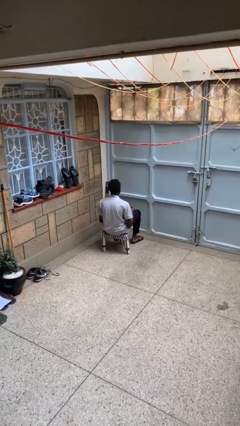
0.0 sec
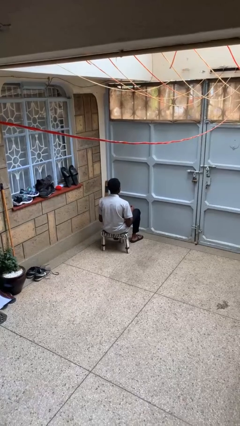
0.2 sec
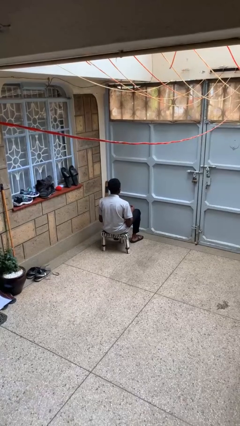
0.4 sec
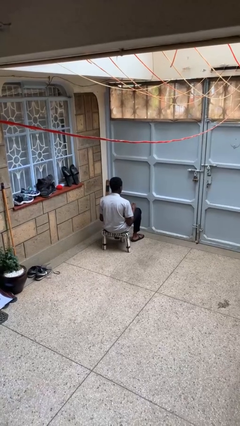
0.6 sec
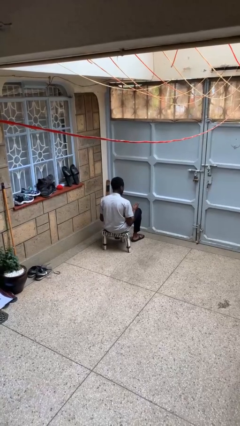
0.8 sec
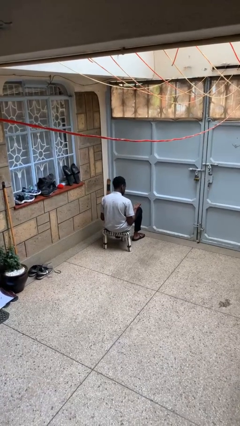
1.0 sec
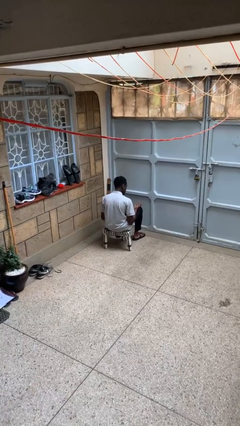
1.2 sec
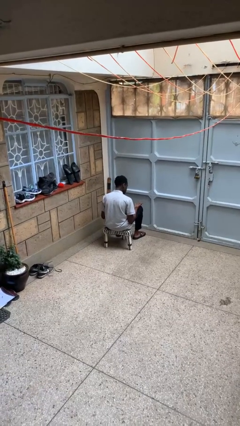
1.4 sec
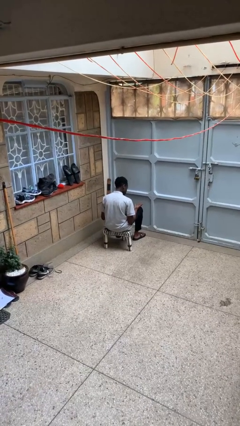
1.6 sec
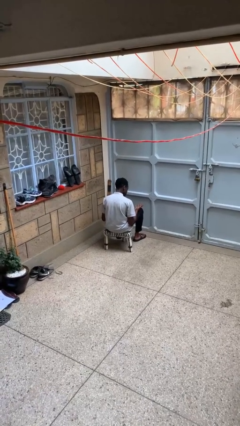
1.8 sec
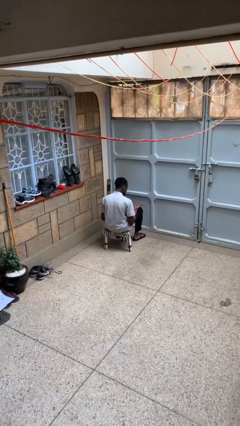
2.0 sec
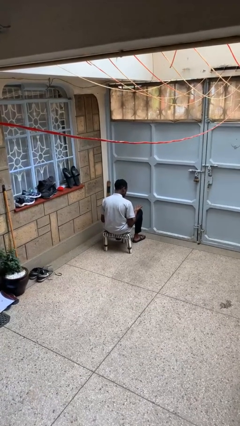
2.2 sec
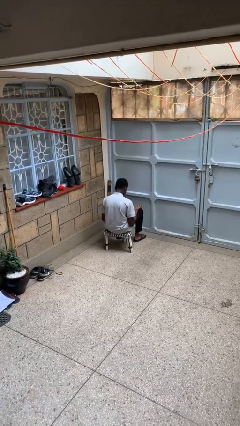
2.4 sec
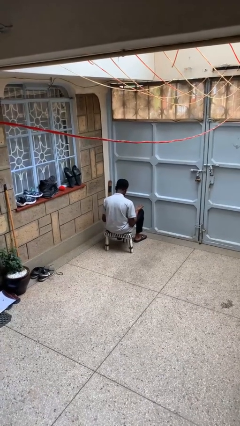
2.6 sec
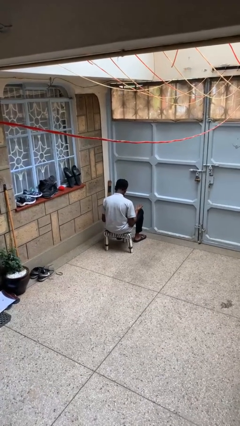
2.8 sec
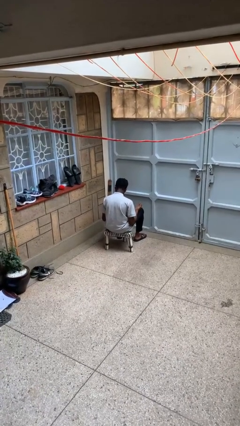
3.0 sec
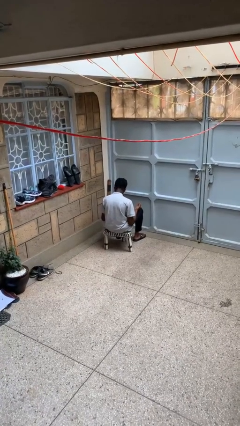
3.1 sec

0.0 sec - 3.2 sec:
person looks at hands in lap

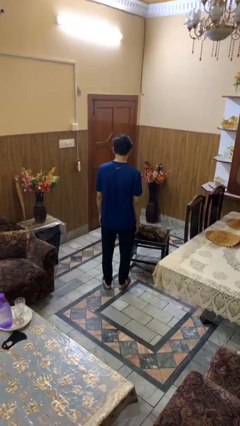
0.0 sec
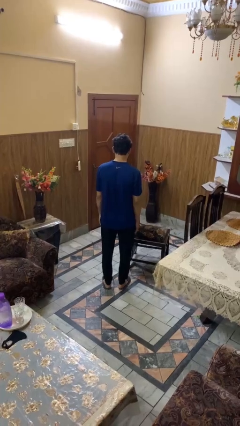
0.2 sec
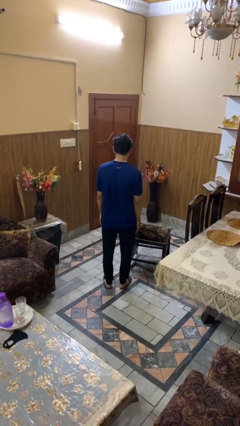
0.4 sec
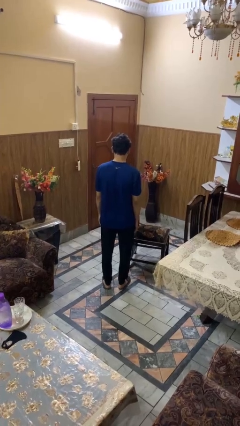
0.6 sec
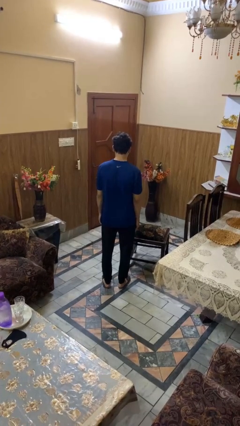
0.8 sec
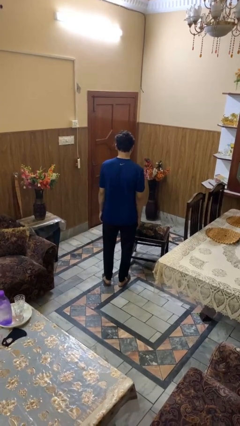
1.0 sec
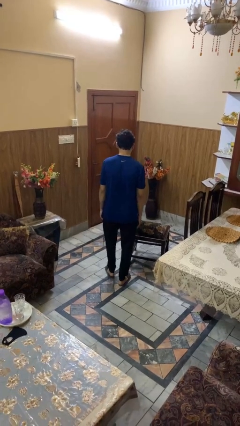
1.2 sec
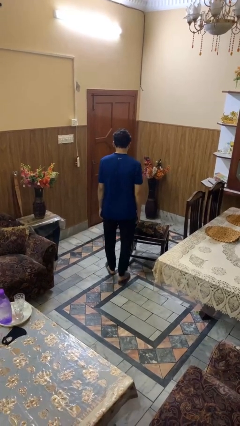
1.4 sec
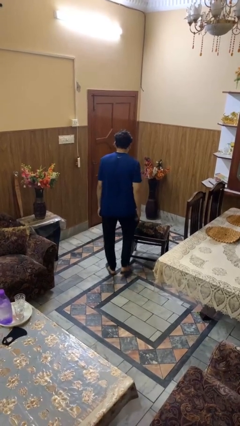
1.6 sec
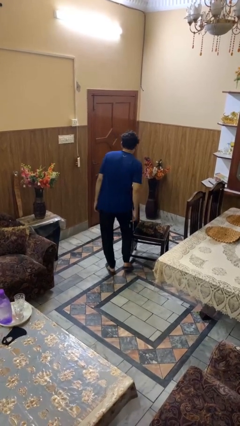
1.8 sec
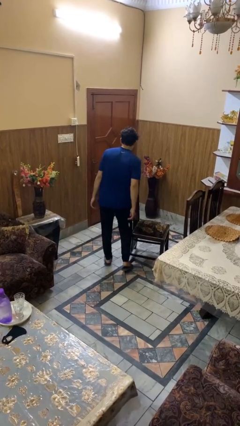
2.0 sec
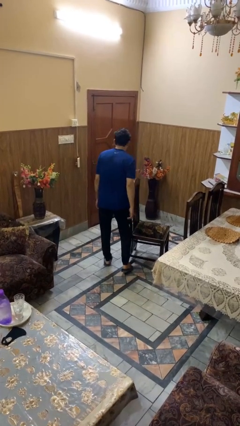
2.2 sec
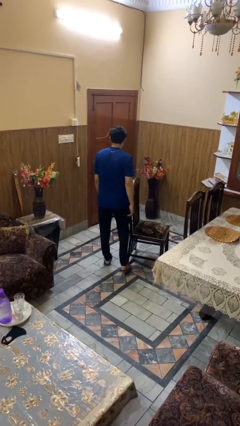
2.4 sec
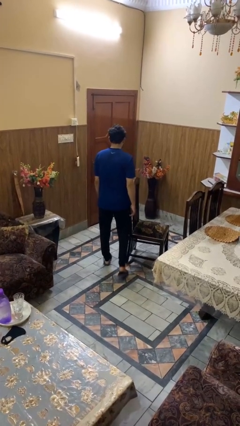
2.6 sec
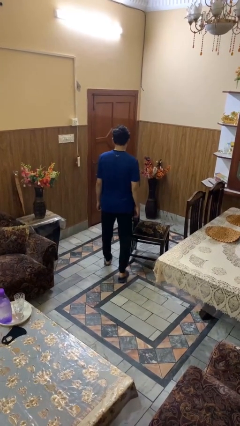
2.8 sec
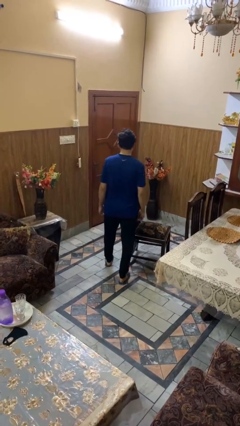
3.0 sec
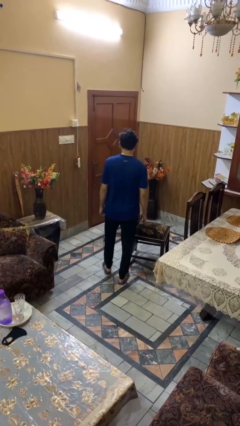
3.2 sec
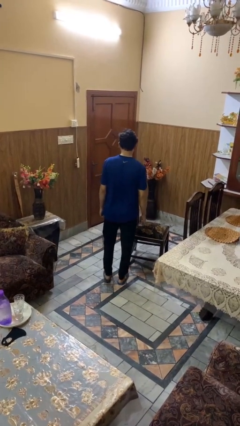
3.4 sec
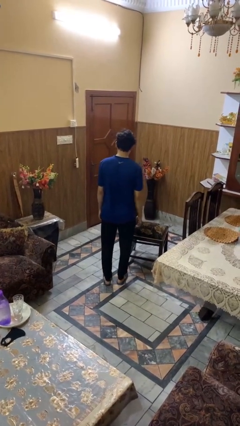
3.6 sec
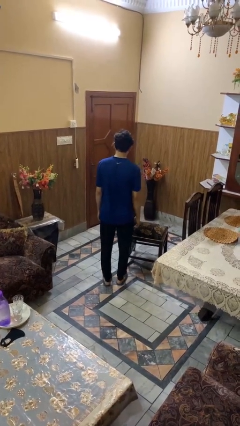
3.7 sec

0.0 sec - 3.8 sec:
person stubs toe

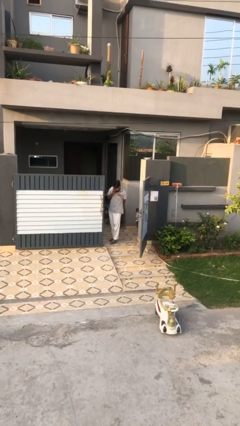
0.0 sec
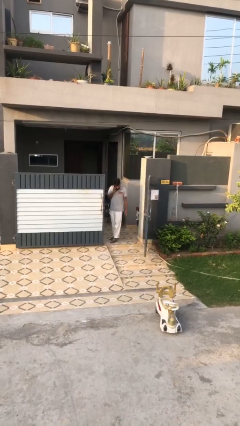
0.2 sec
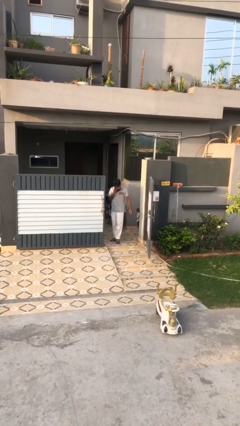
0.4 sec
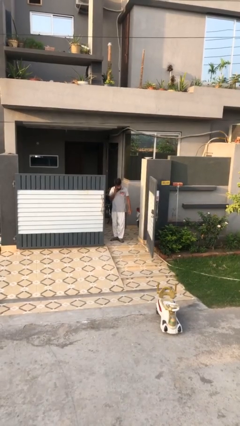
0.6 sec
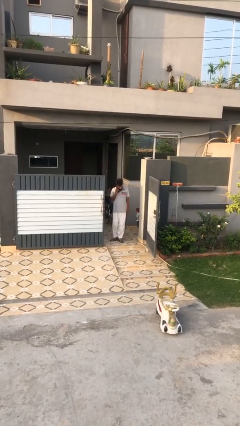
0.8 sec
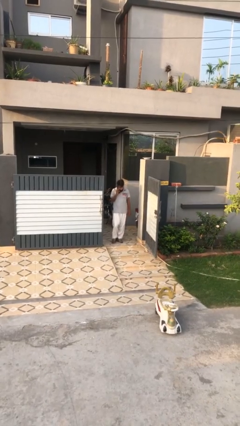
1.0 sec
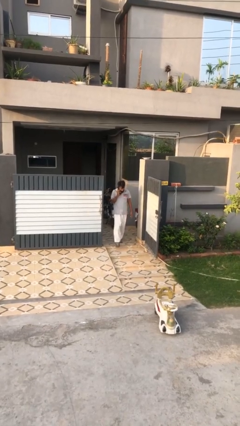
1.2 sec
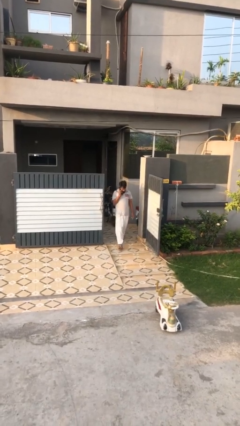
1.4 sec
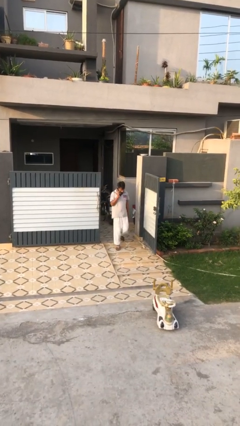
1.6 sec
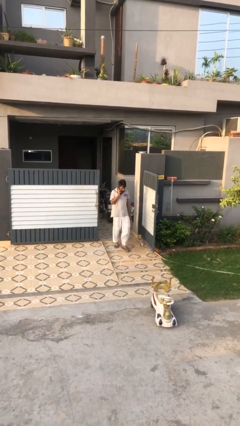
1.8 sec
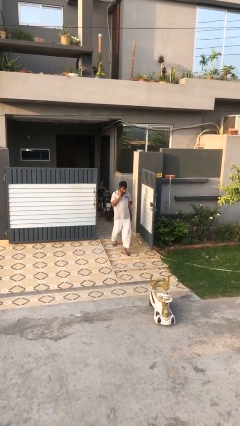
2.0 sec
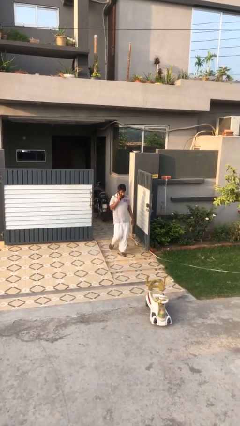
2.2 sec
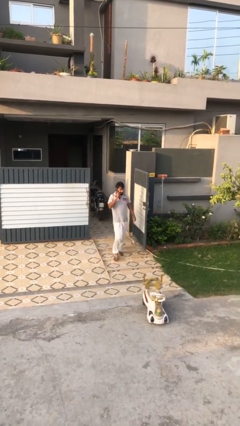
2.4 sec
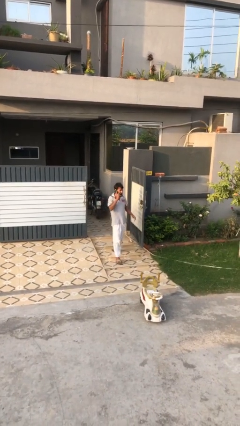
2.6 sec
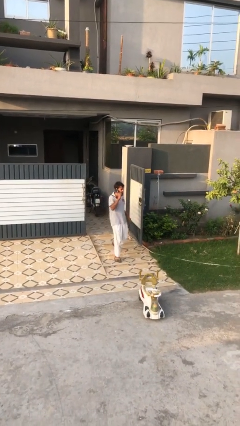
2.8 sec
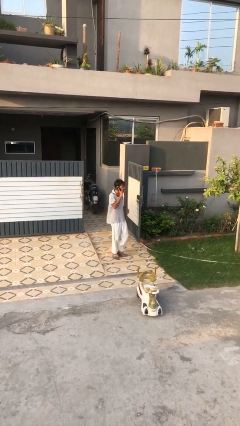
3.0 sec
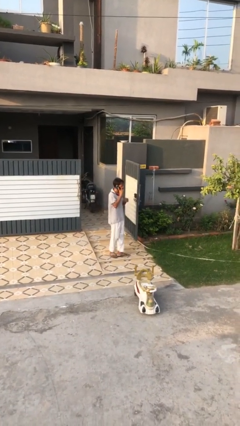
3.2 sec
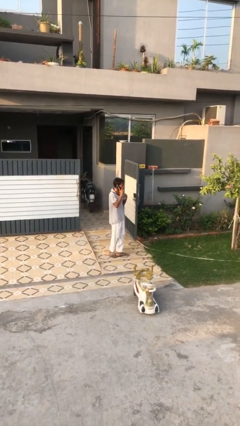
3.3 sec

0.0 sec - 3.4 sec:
person enters scene through structure

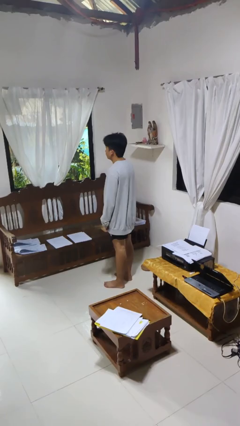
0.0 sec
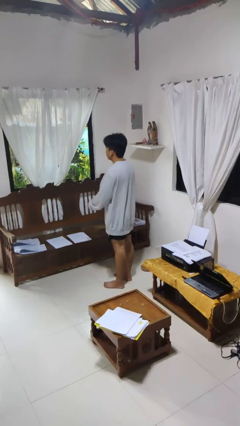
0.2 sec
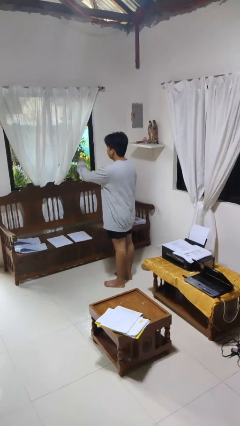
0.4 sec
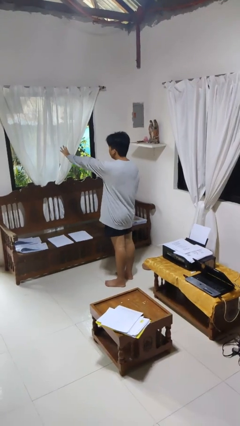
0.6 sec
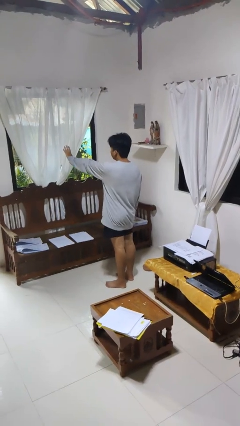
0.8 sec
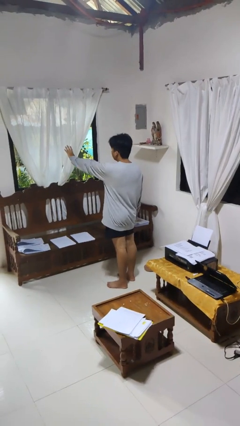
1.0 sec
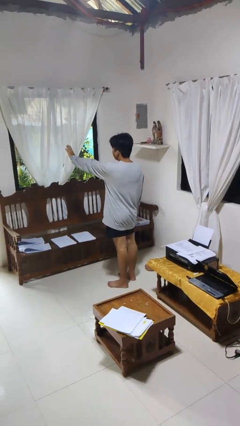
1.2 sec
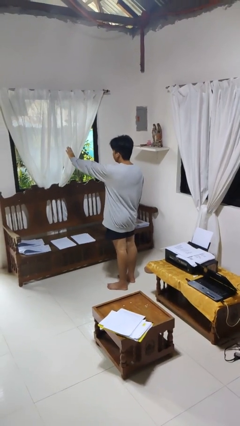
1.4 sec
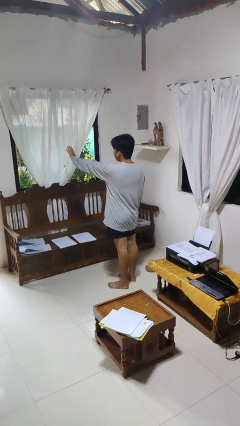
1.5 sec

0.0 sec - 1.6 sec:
person gestures stop

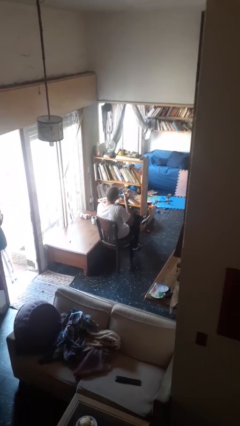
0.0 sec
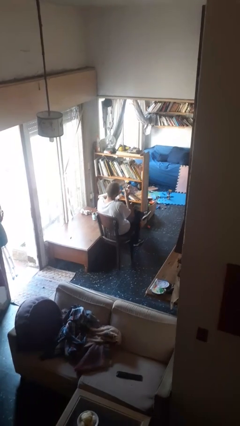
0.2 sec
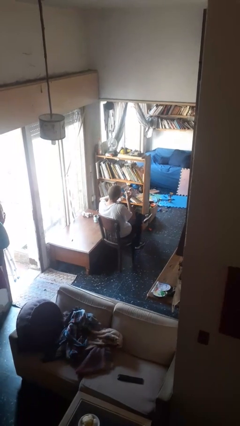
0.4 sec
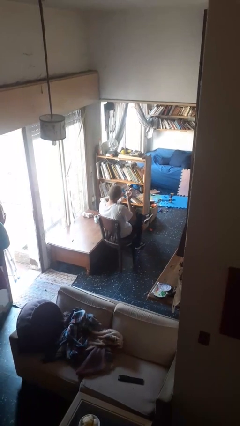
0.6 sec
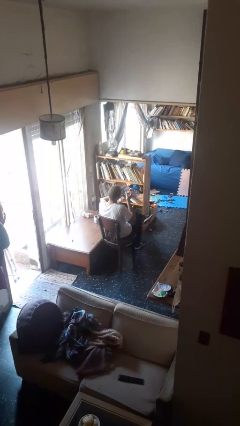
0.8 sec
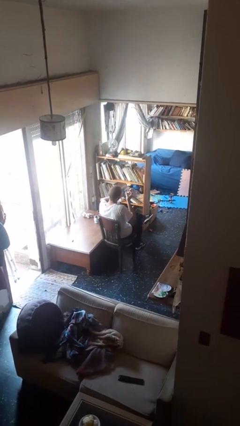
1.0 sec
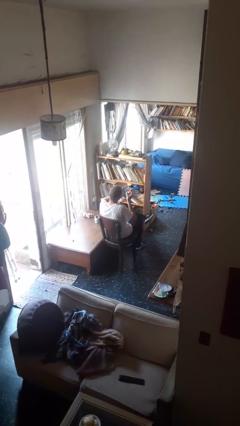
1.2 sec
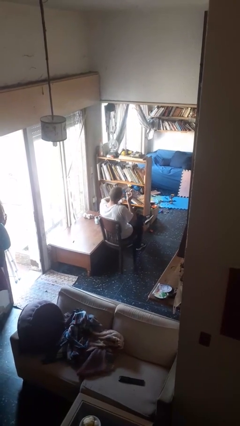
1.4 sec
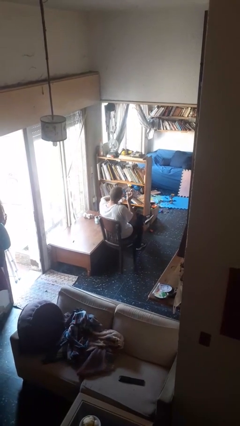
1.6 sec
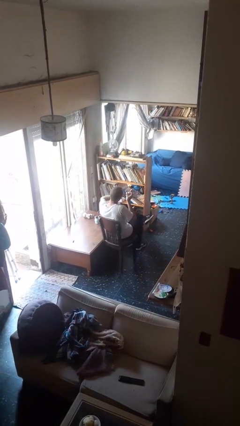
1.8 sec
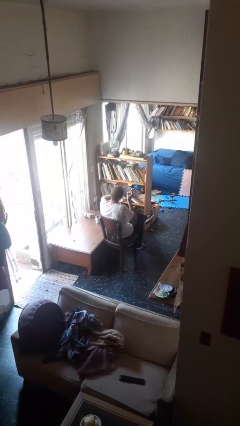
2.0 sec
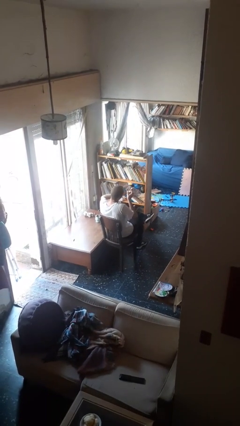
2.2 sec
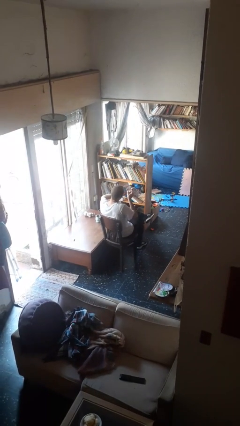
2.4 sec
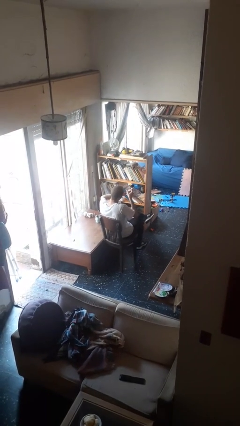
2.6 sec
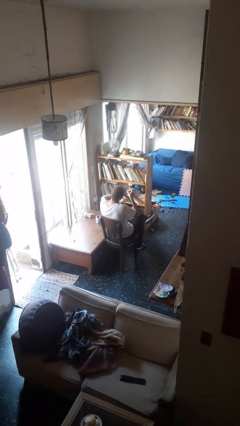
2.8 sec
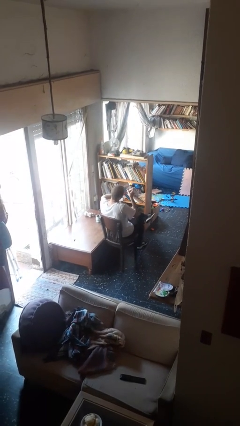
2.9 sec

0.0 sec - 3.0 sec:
person clips fingernails

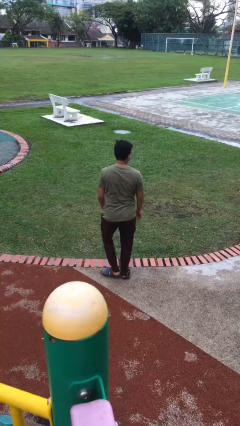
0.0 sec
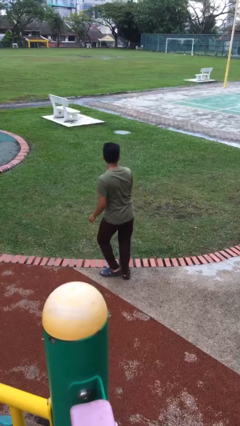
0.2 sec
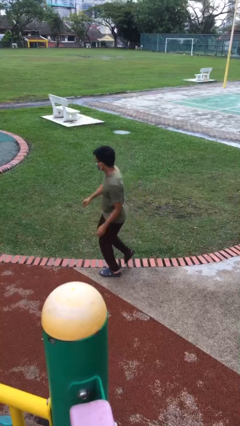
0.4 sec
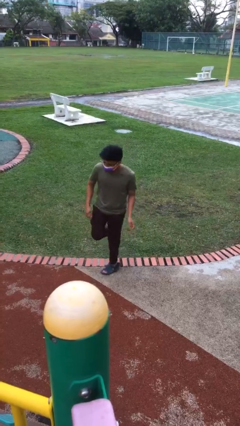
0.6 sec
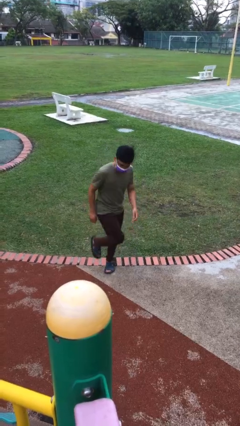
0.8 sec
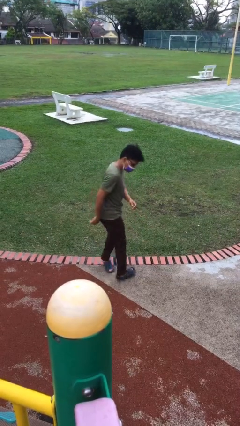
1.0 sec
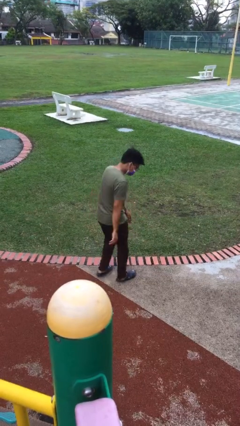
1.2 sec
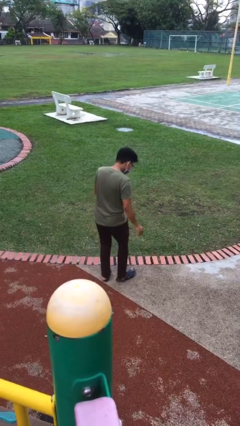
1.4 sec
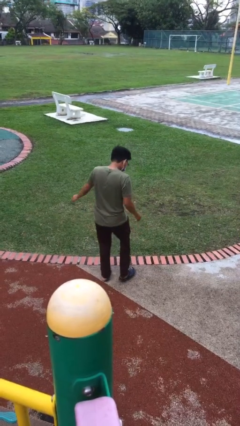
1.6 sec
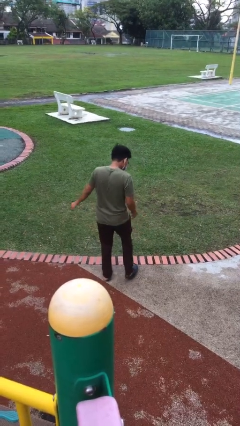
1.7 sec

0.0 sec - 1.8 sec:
person twirls

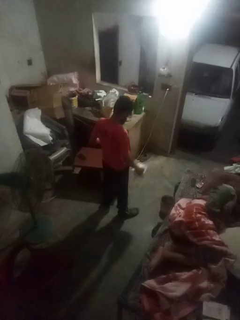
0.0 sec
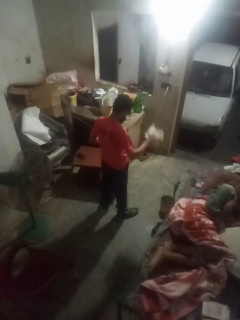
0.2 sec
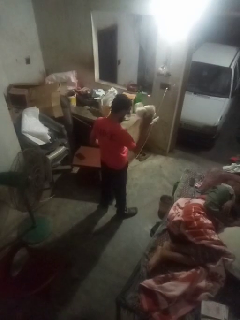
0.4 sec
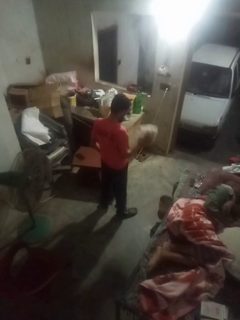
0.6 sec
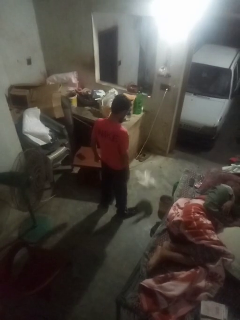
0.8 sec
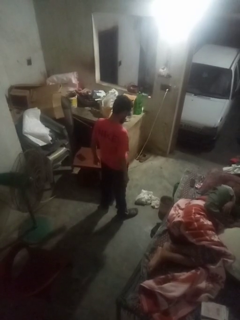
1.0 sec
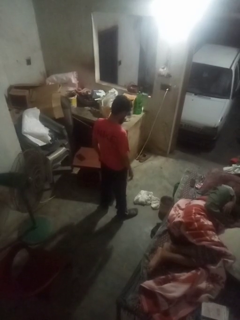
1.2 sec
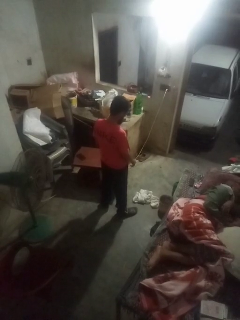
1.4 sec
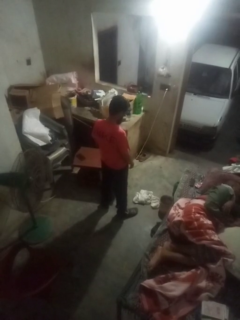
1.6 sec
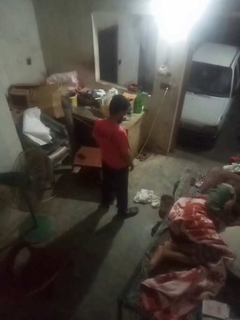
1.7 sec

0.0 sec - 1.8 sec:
person throws object to ground
